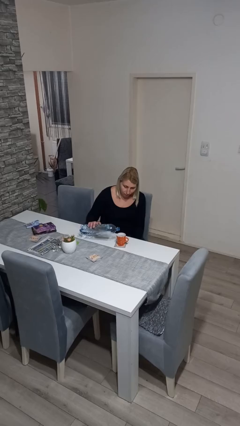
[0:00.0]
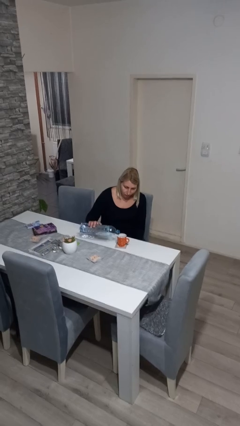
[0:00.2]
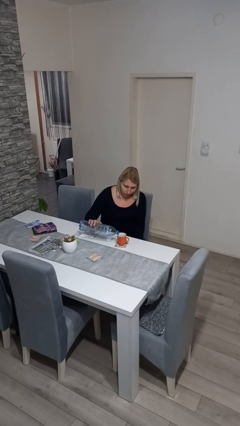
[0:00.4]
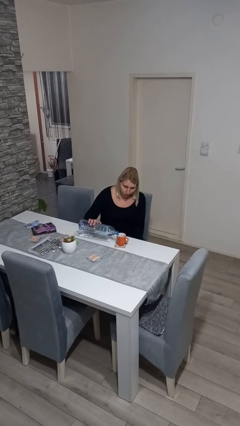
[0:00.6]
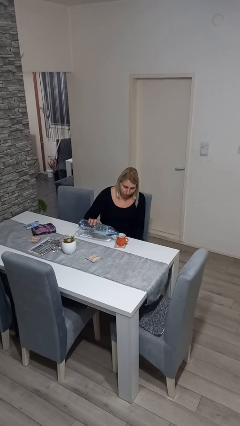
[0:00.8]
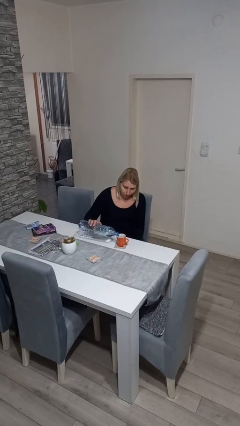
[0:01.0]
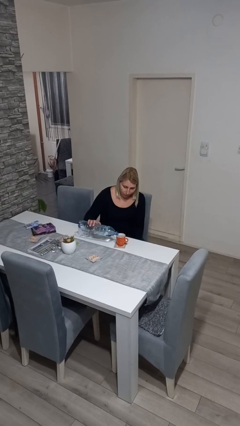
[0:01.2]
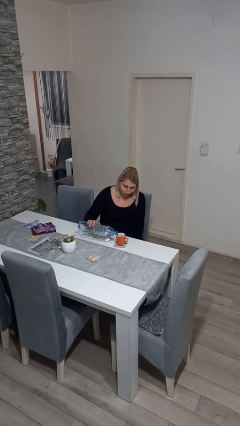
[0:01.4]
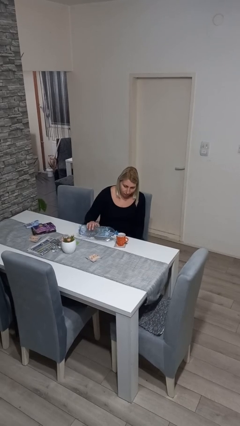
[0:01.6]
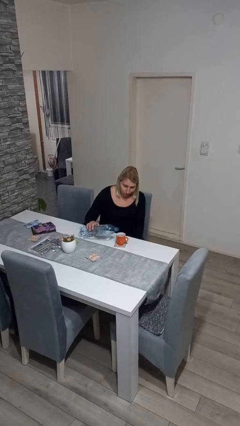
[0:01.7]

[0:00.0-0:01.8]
person pours liquid into cup

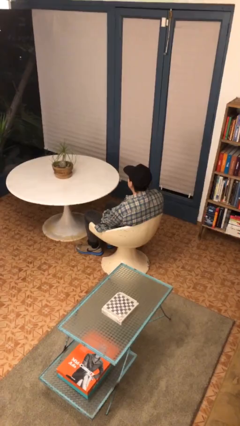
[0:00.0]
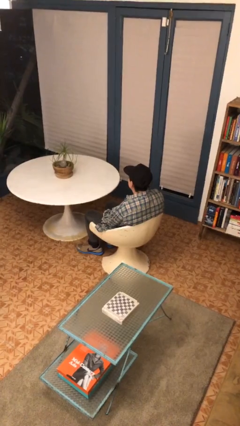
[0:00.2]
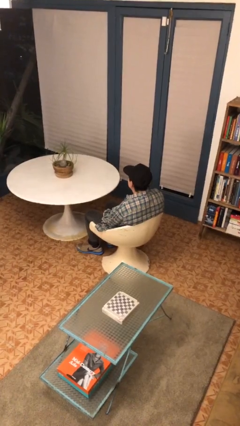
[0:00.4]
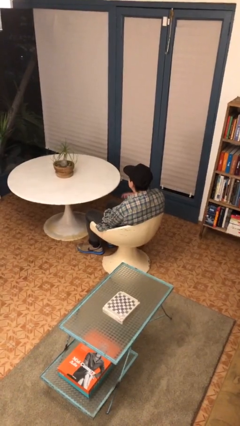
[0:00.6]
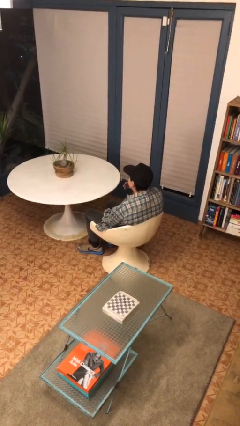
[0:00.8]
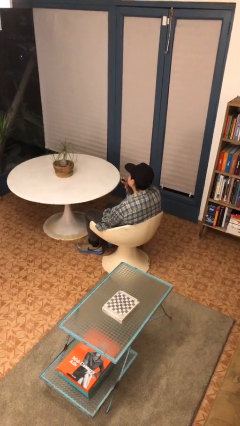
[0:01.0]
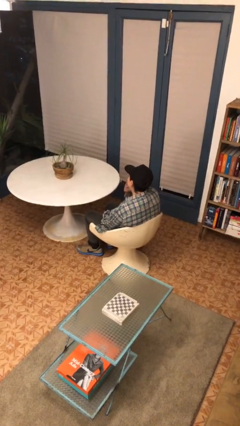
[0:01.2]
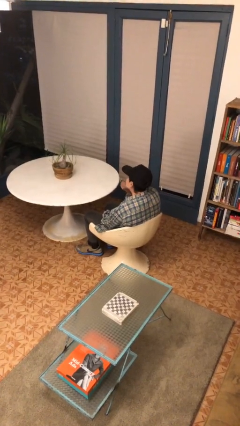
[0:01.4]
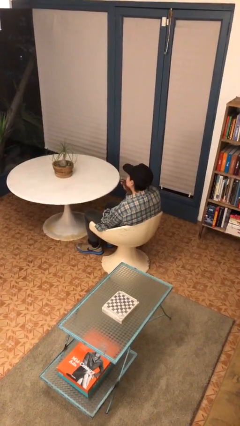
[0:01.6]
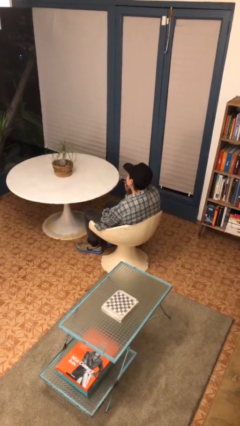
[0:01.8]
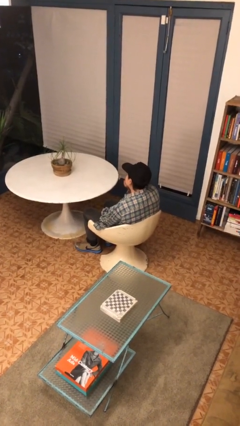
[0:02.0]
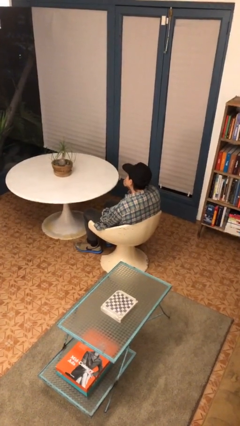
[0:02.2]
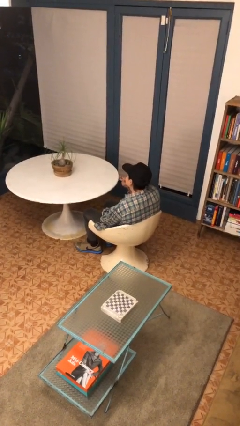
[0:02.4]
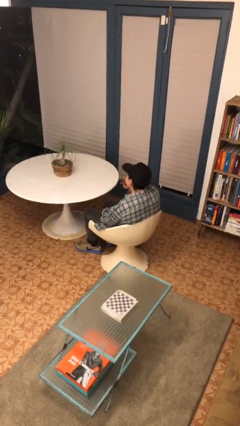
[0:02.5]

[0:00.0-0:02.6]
person strokes chin

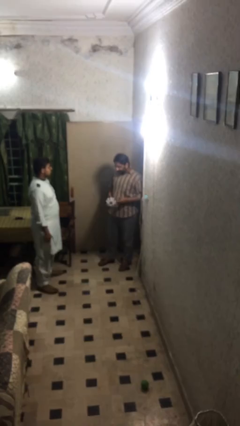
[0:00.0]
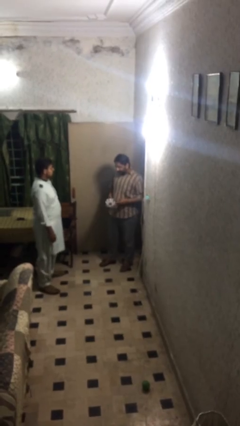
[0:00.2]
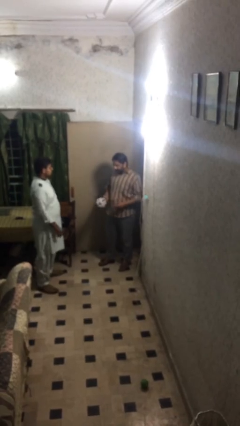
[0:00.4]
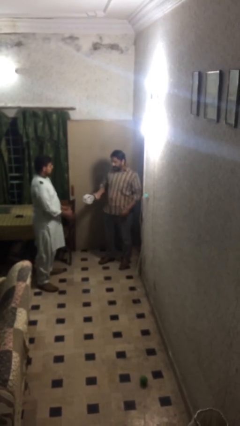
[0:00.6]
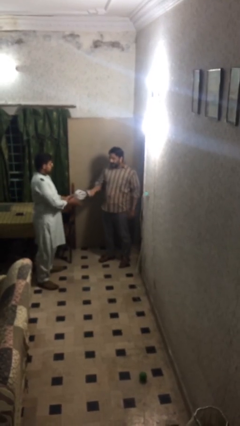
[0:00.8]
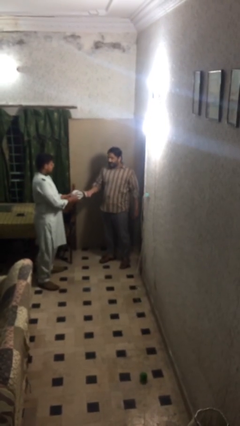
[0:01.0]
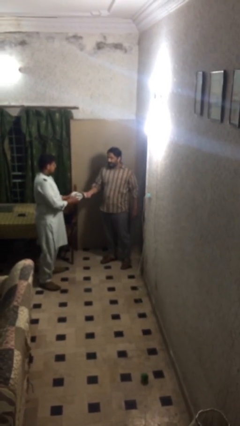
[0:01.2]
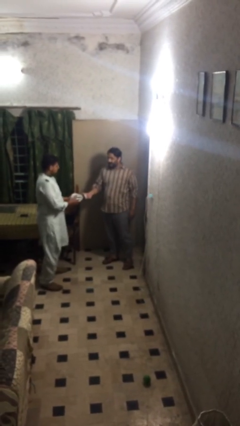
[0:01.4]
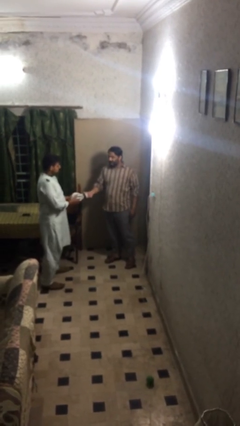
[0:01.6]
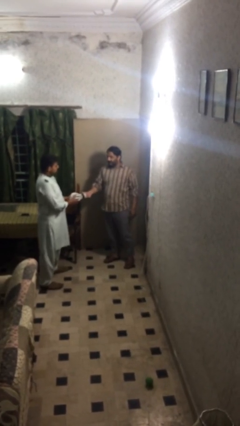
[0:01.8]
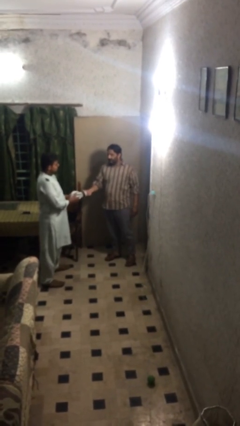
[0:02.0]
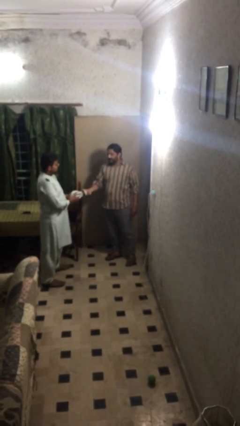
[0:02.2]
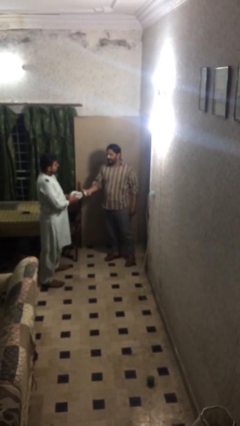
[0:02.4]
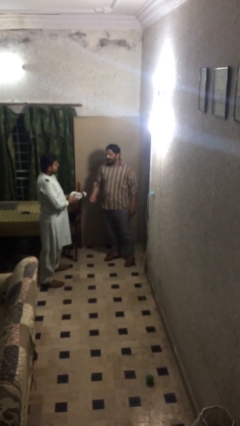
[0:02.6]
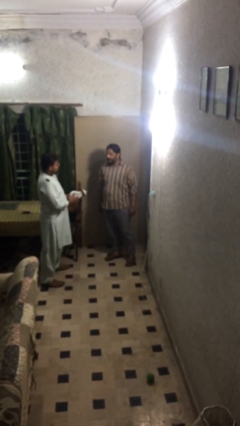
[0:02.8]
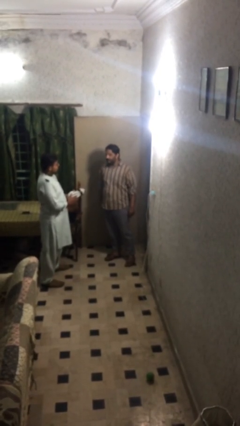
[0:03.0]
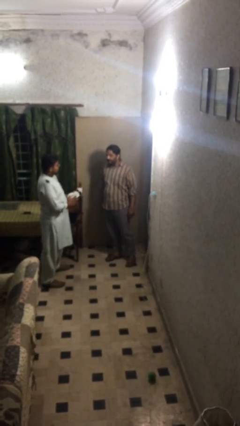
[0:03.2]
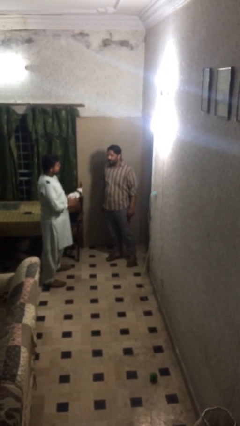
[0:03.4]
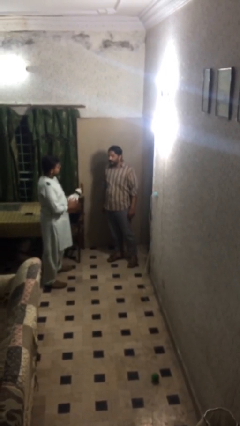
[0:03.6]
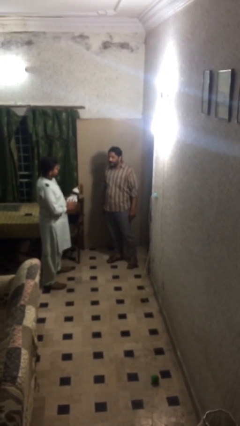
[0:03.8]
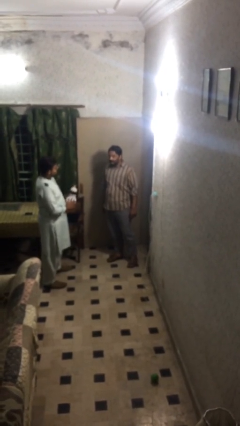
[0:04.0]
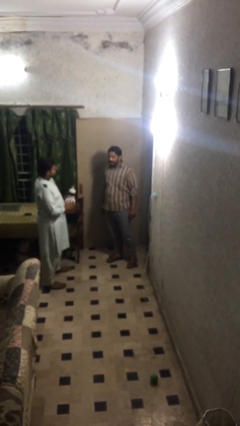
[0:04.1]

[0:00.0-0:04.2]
person transfers object to person

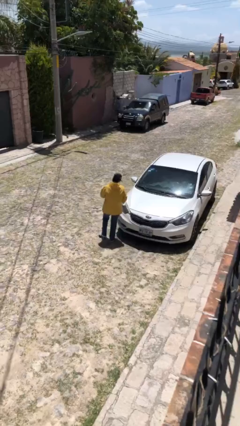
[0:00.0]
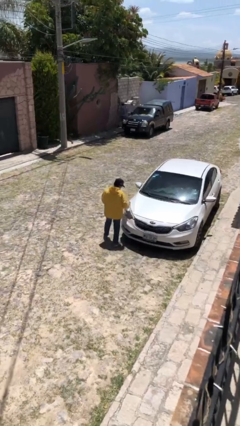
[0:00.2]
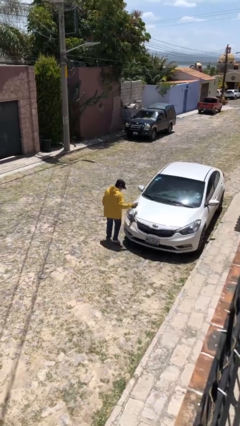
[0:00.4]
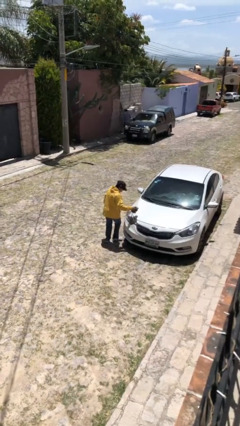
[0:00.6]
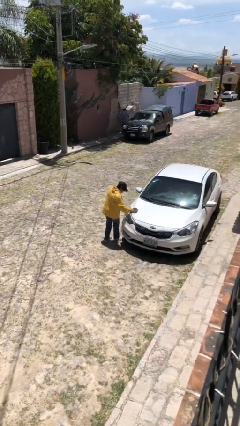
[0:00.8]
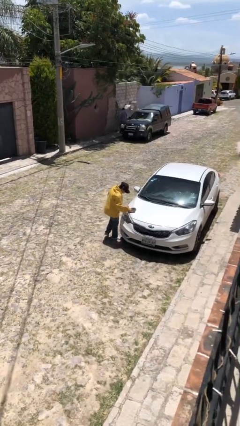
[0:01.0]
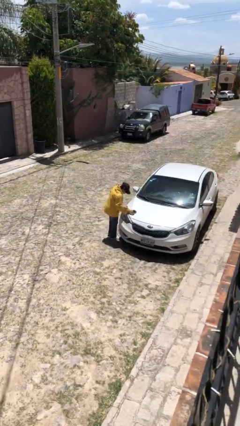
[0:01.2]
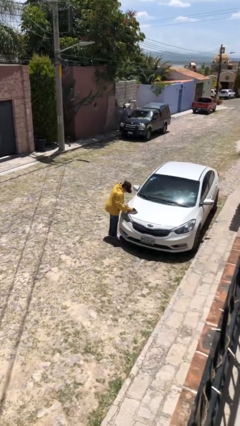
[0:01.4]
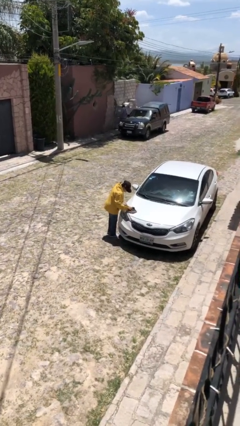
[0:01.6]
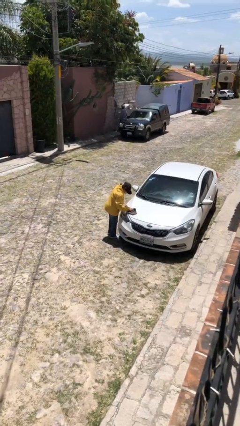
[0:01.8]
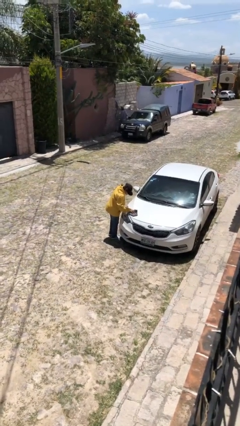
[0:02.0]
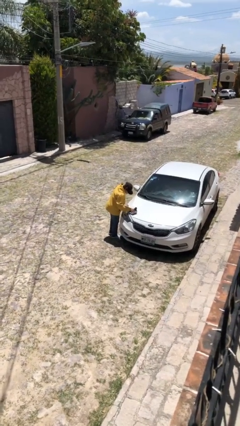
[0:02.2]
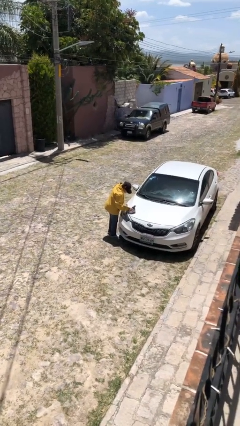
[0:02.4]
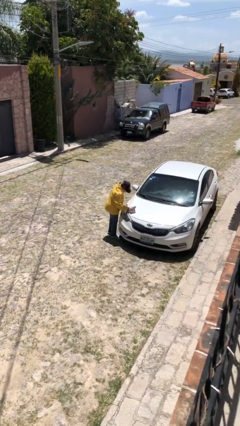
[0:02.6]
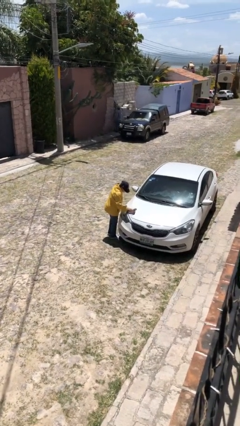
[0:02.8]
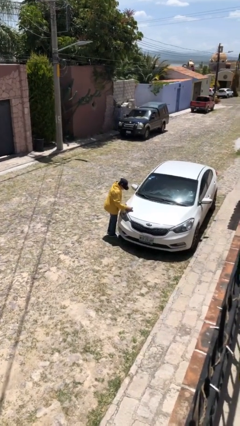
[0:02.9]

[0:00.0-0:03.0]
person polishes car with rag

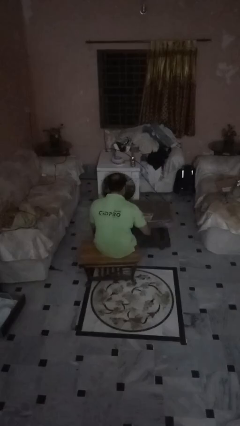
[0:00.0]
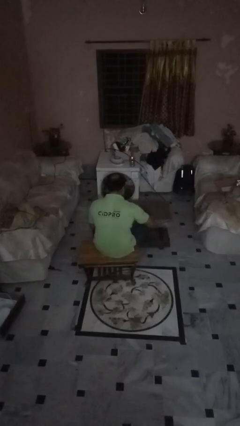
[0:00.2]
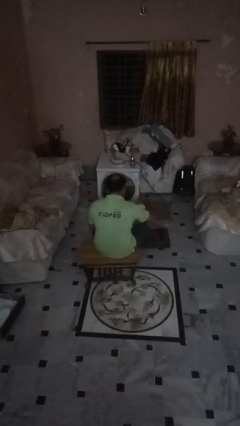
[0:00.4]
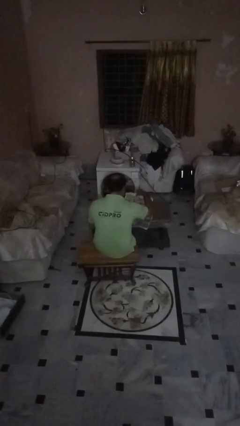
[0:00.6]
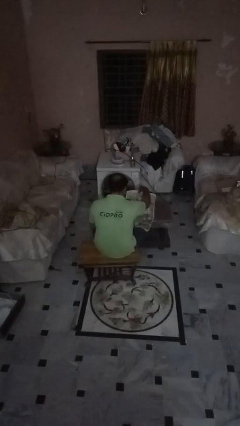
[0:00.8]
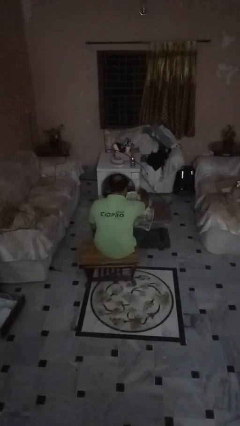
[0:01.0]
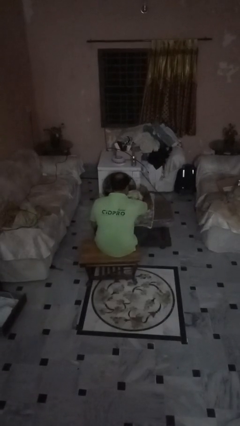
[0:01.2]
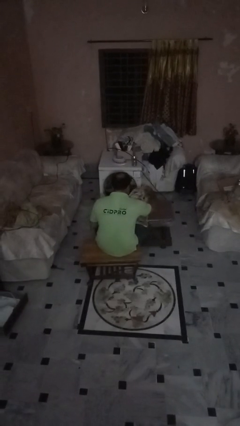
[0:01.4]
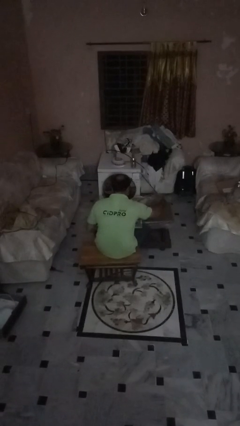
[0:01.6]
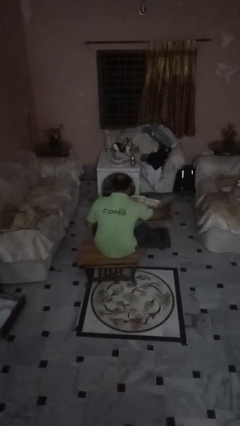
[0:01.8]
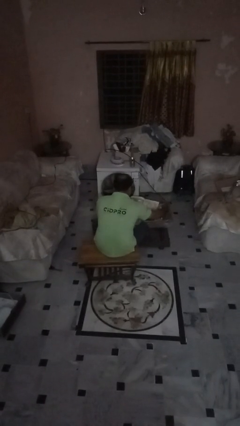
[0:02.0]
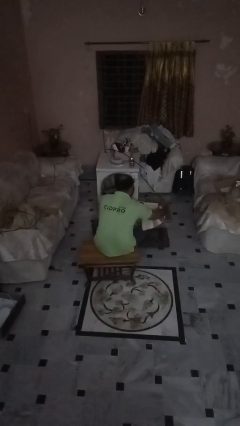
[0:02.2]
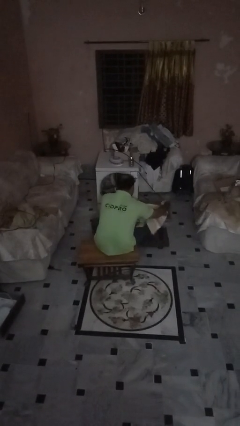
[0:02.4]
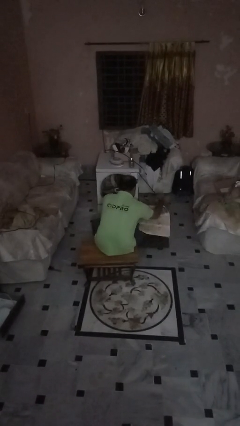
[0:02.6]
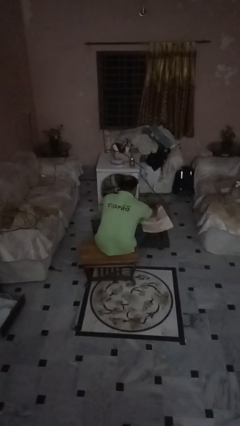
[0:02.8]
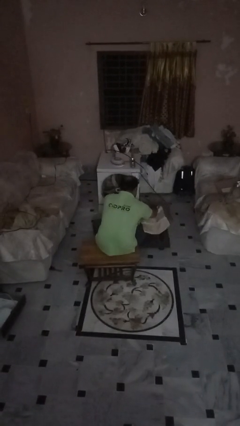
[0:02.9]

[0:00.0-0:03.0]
person tears paper

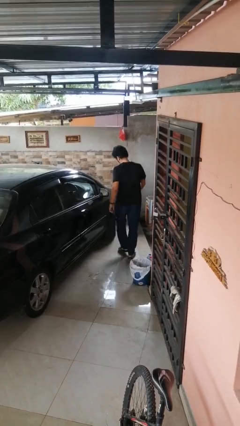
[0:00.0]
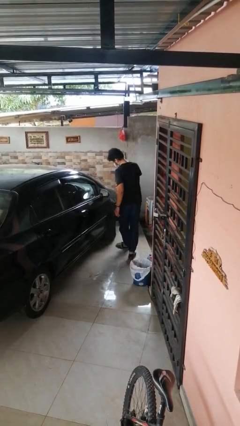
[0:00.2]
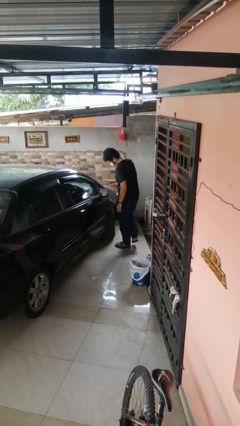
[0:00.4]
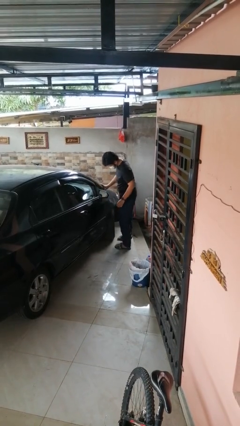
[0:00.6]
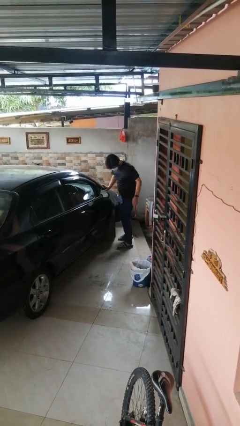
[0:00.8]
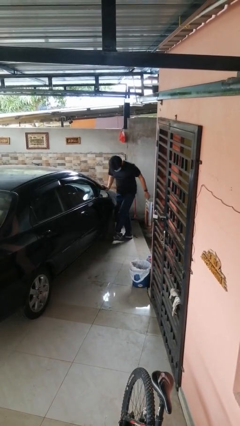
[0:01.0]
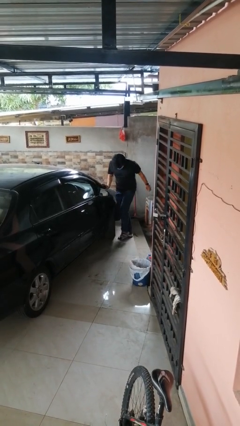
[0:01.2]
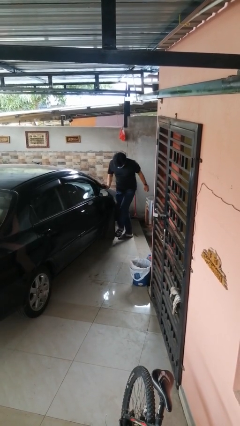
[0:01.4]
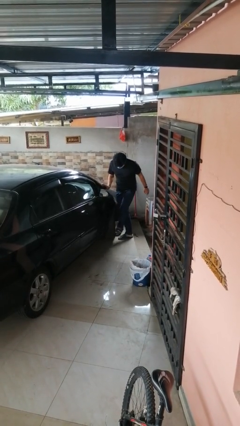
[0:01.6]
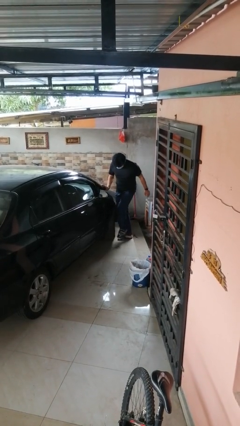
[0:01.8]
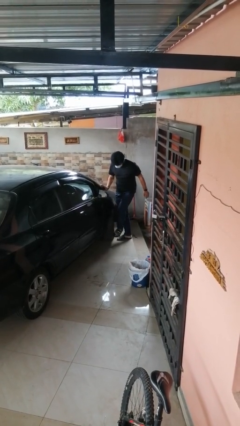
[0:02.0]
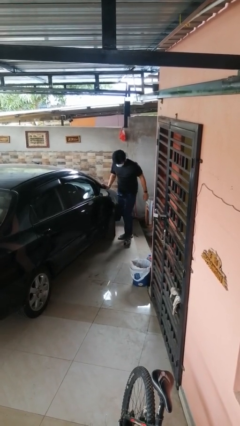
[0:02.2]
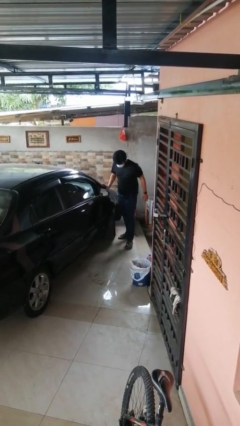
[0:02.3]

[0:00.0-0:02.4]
person kicks car tires

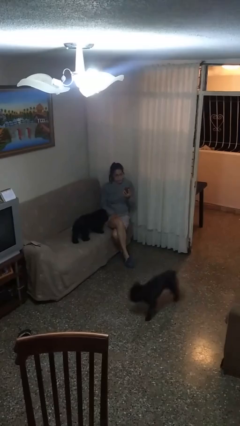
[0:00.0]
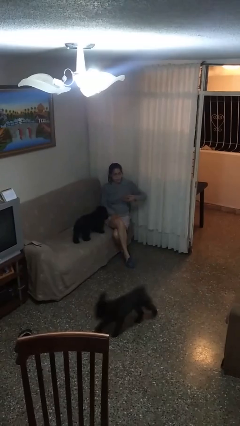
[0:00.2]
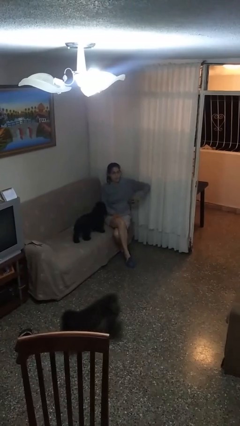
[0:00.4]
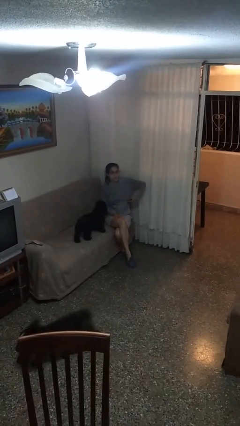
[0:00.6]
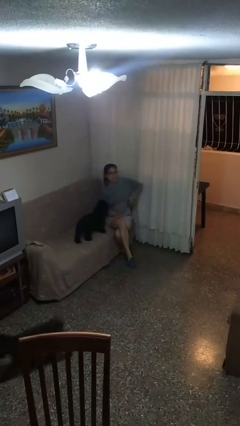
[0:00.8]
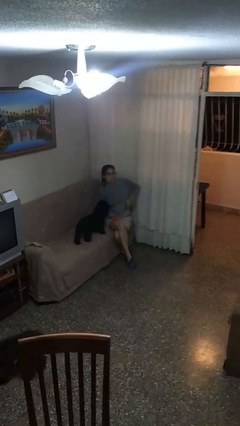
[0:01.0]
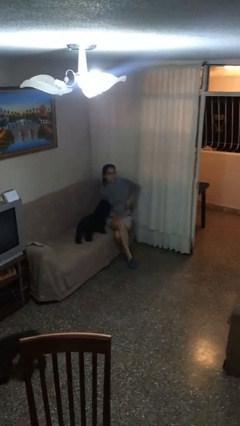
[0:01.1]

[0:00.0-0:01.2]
person puts phone into pocket
